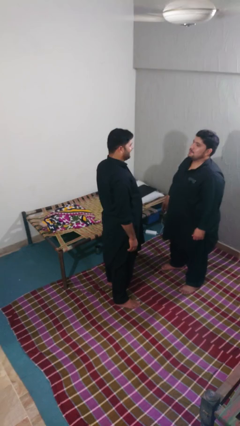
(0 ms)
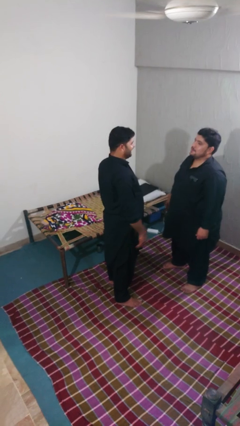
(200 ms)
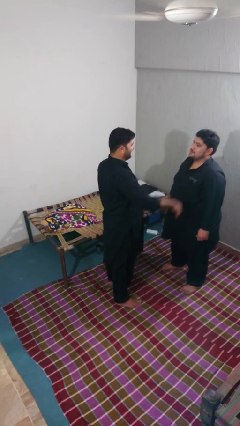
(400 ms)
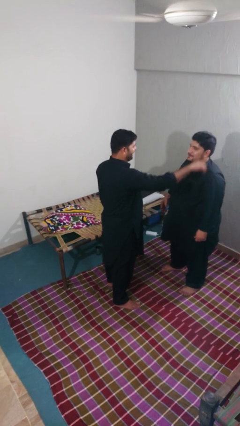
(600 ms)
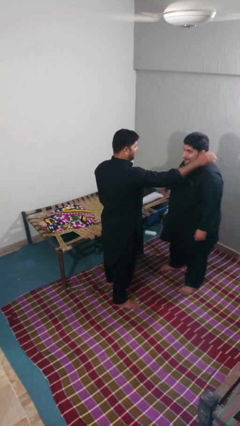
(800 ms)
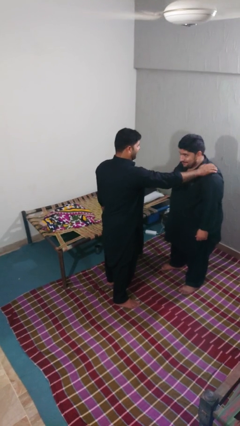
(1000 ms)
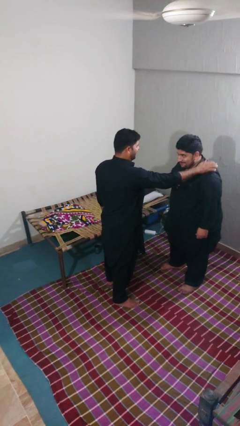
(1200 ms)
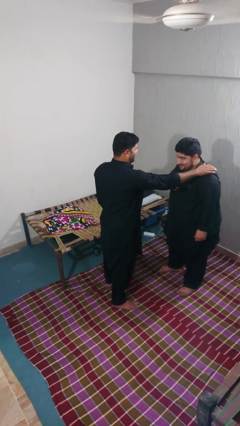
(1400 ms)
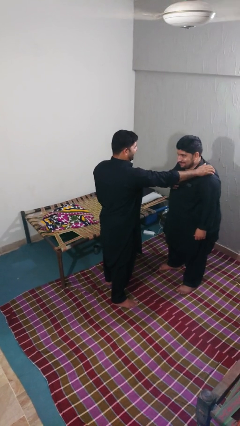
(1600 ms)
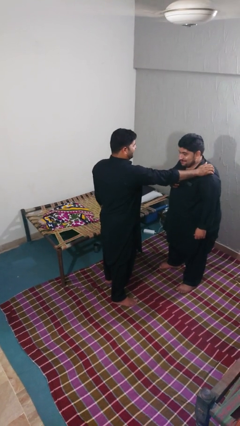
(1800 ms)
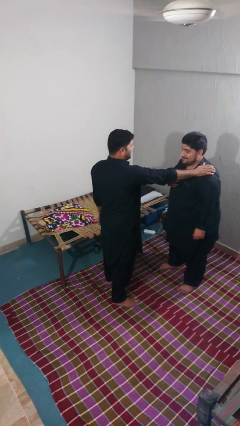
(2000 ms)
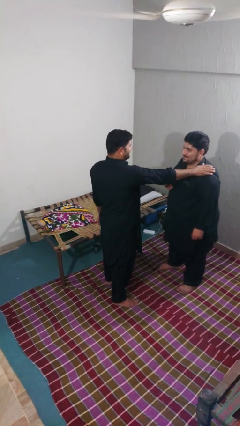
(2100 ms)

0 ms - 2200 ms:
person pounds shoulders of person

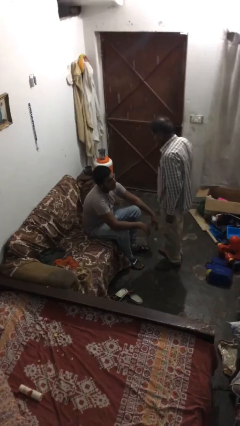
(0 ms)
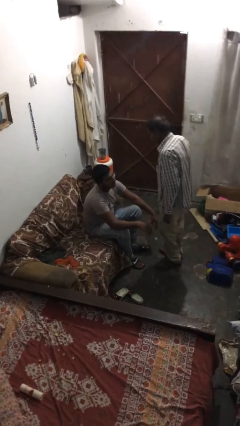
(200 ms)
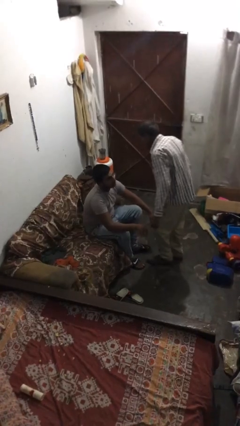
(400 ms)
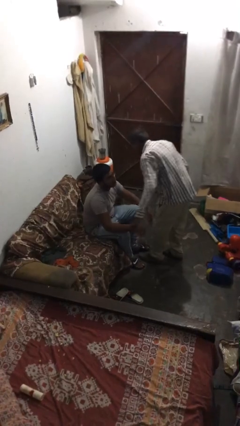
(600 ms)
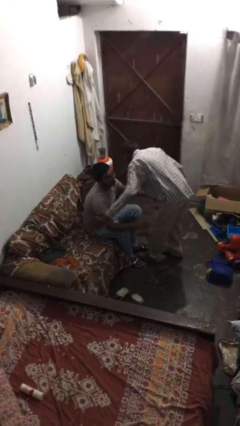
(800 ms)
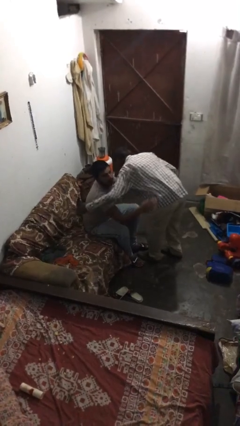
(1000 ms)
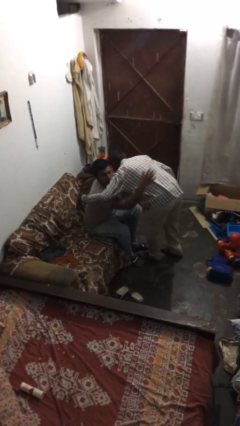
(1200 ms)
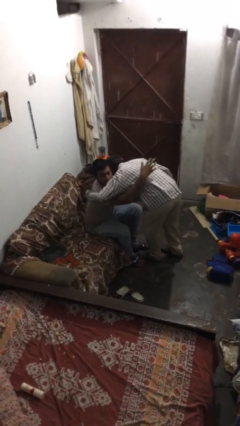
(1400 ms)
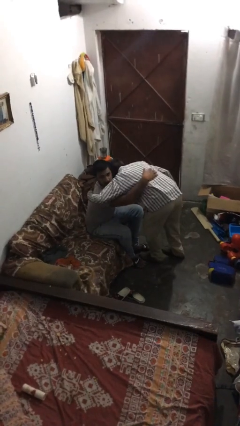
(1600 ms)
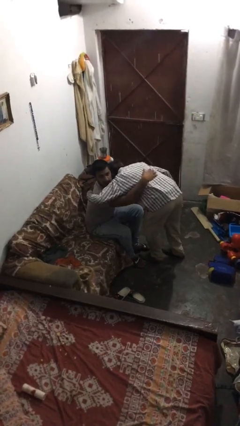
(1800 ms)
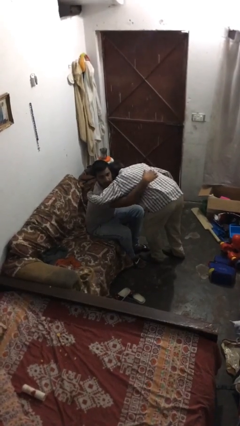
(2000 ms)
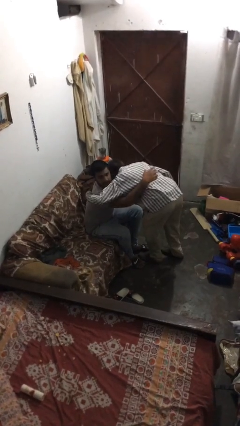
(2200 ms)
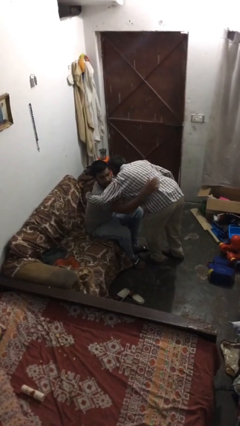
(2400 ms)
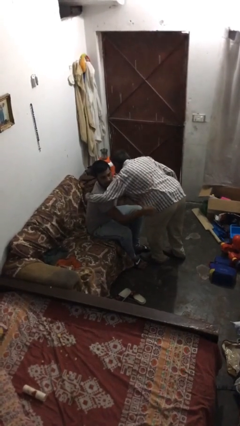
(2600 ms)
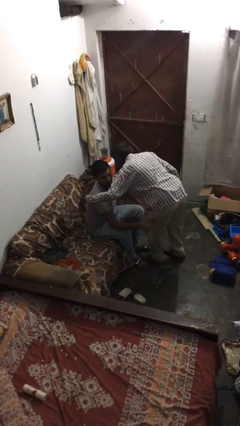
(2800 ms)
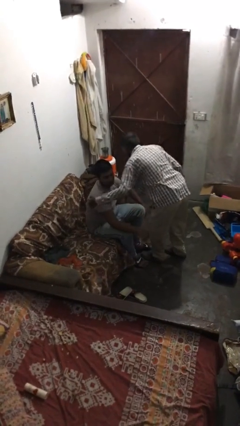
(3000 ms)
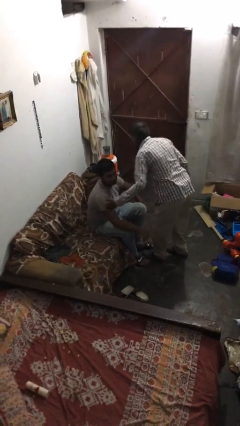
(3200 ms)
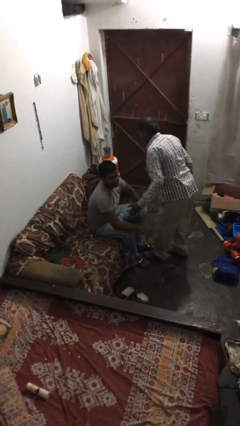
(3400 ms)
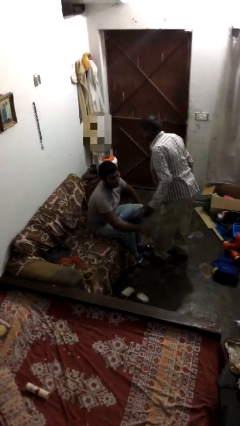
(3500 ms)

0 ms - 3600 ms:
person embraces person

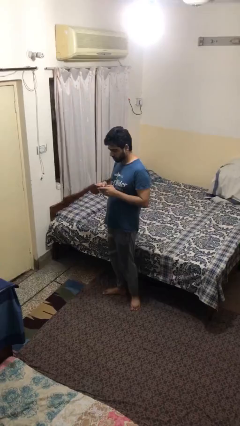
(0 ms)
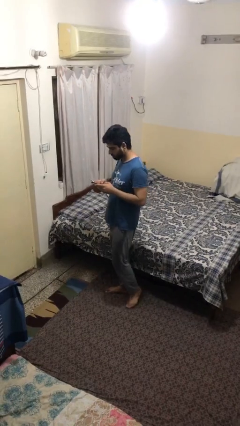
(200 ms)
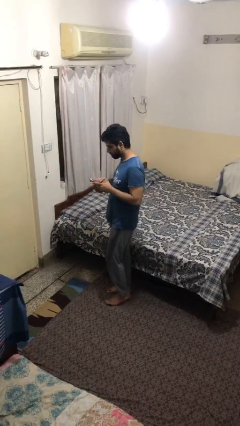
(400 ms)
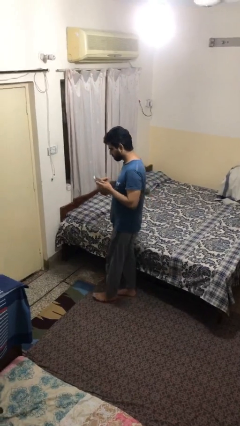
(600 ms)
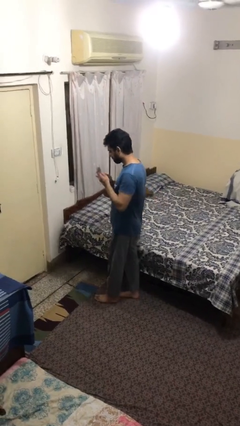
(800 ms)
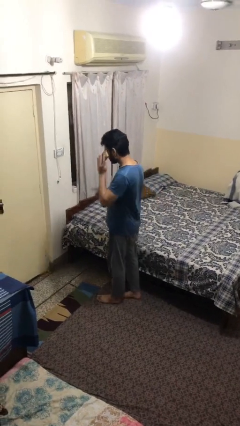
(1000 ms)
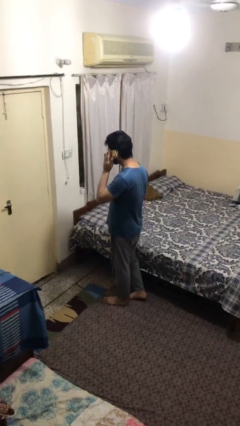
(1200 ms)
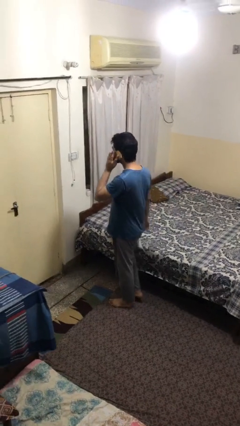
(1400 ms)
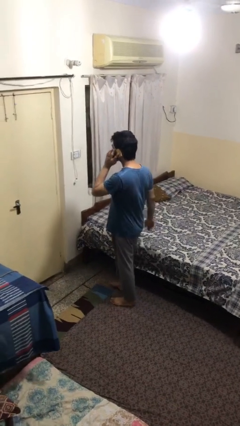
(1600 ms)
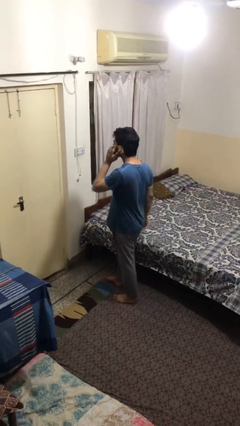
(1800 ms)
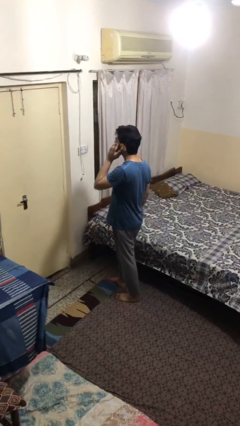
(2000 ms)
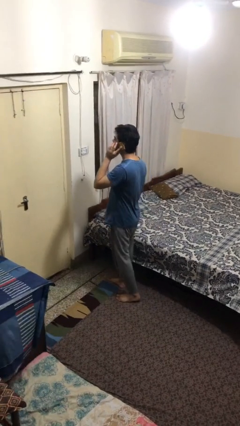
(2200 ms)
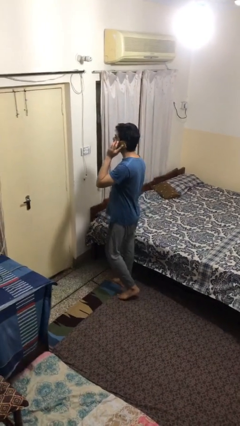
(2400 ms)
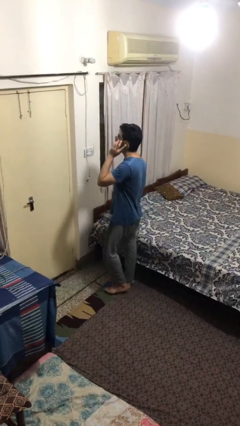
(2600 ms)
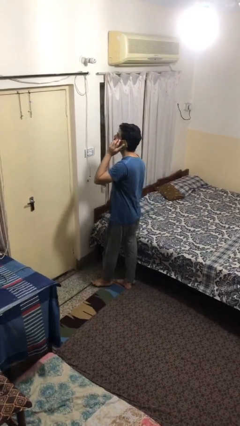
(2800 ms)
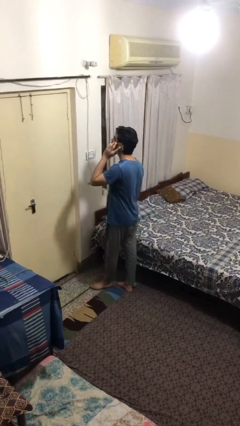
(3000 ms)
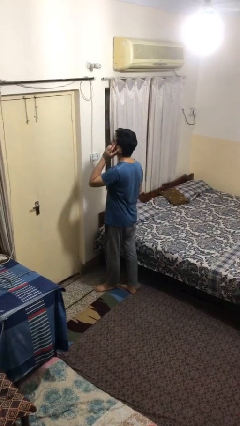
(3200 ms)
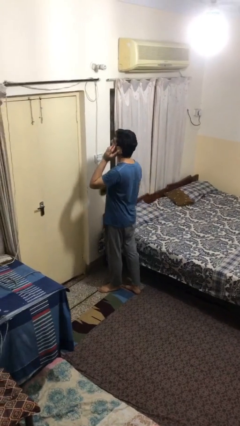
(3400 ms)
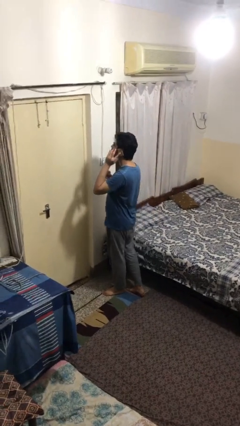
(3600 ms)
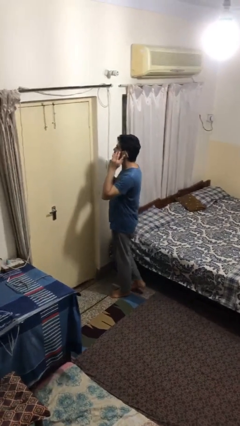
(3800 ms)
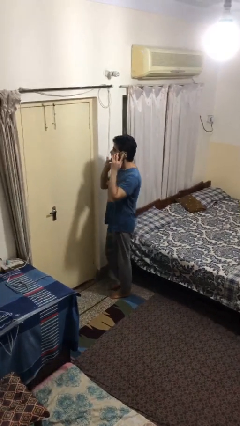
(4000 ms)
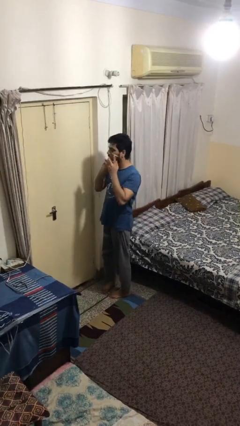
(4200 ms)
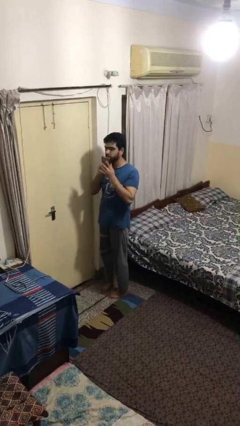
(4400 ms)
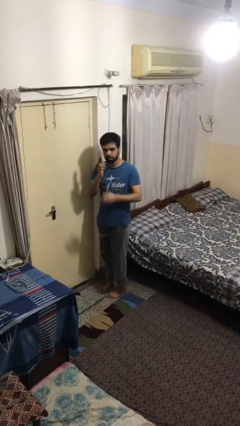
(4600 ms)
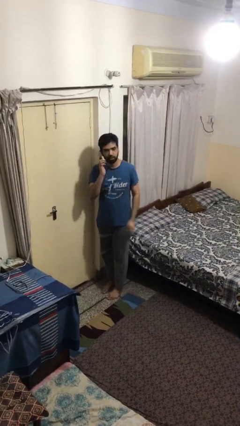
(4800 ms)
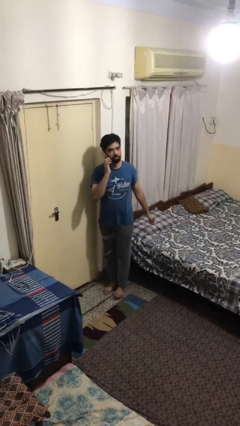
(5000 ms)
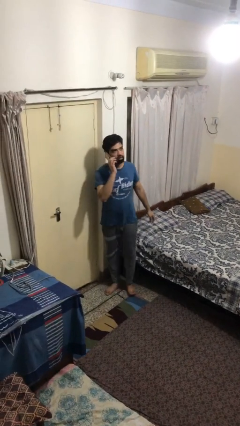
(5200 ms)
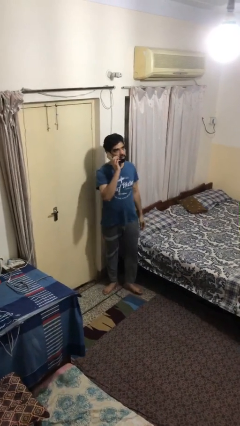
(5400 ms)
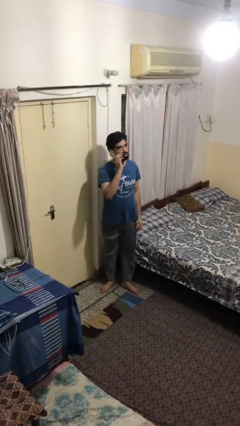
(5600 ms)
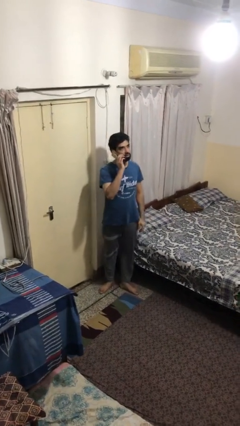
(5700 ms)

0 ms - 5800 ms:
person talks on phone

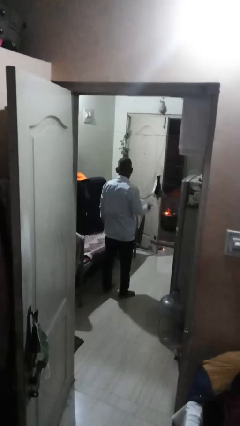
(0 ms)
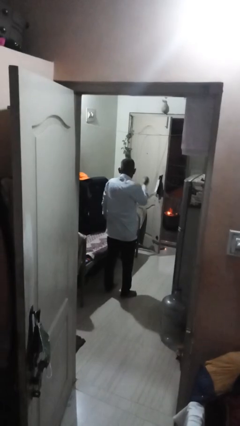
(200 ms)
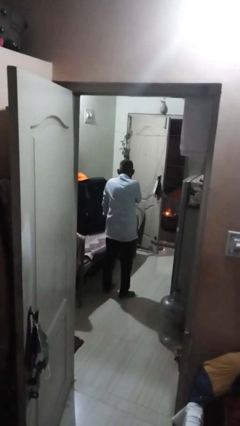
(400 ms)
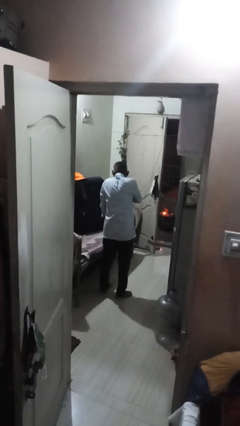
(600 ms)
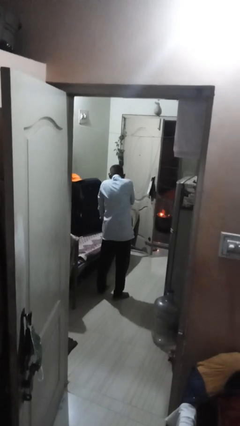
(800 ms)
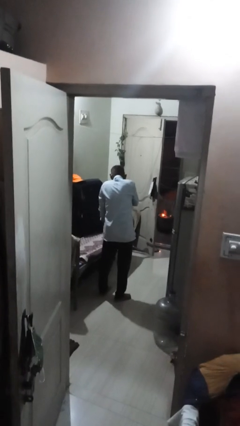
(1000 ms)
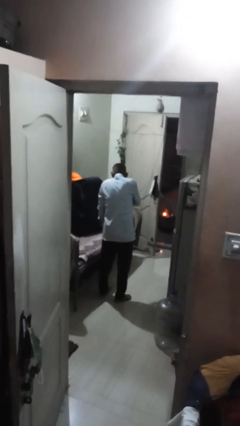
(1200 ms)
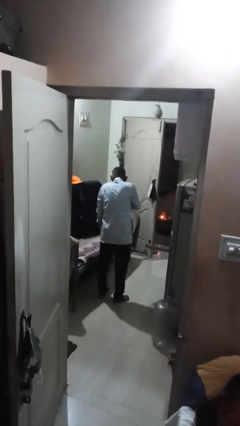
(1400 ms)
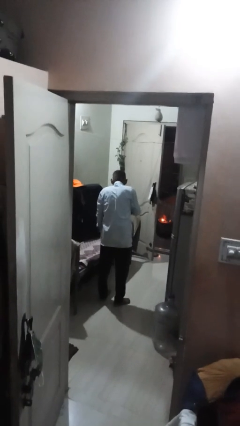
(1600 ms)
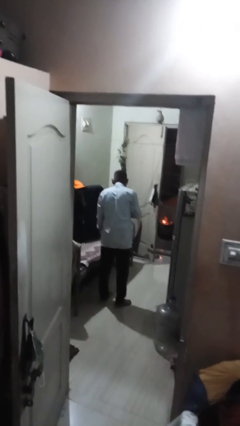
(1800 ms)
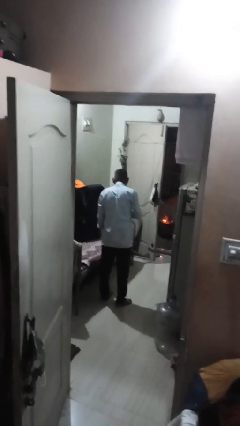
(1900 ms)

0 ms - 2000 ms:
person swats bug

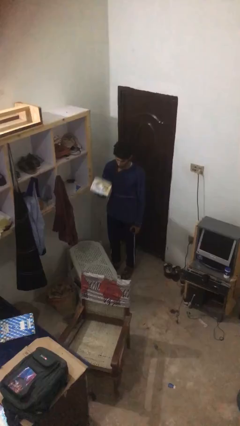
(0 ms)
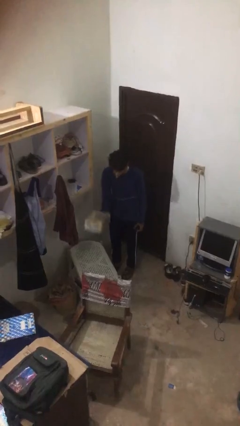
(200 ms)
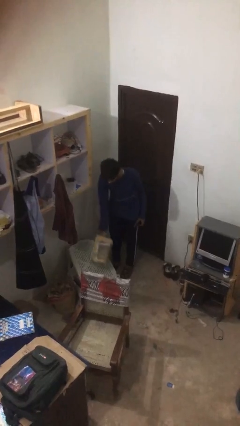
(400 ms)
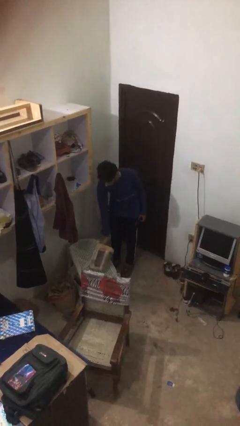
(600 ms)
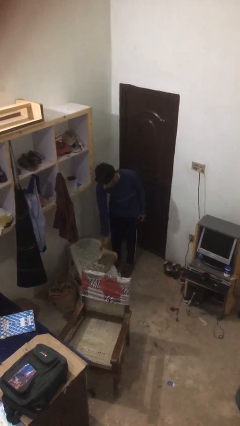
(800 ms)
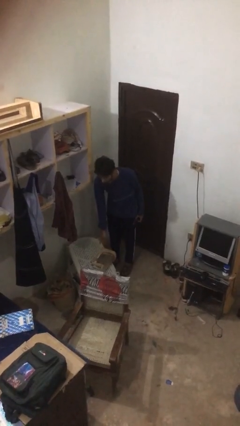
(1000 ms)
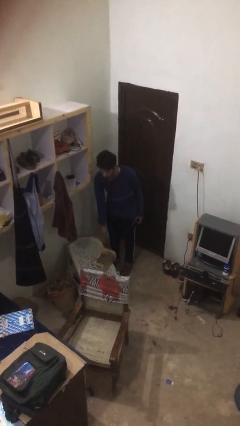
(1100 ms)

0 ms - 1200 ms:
person puts down object on table

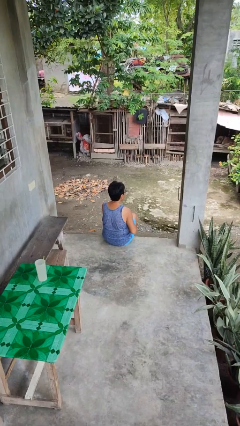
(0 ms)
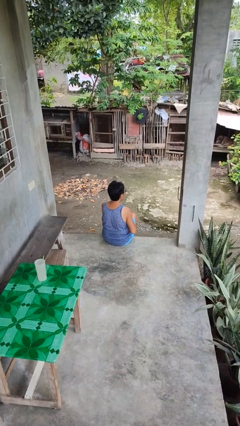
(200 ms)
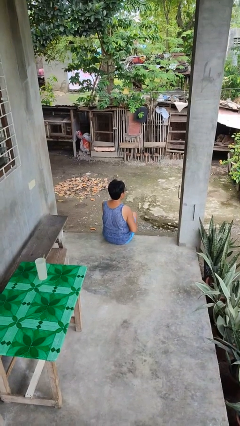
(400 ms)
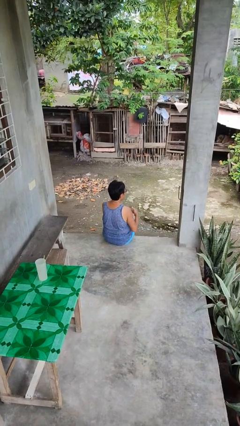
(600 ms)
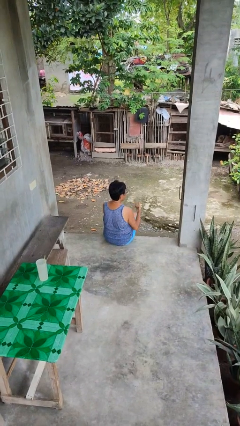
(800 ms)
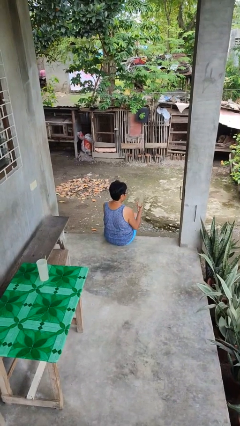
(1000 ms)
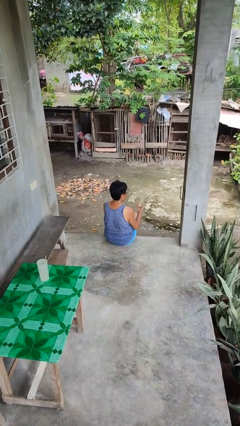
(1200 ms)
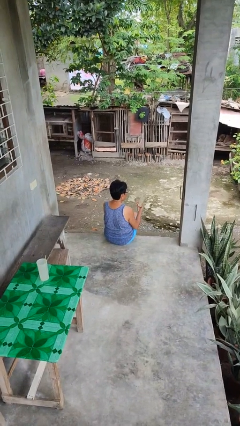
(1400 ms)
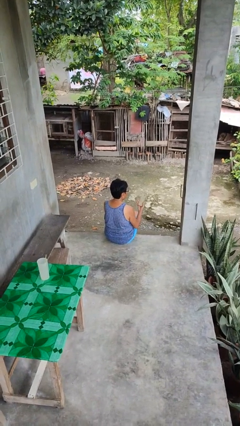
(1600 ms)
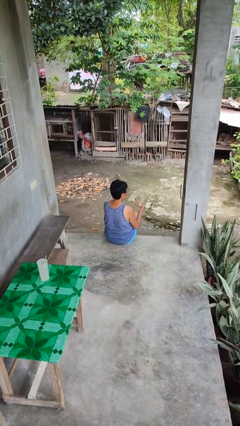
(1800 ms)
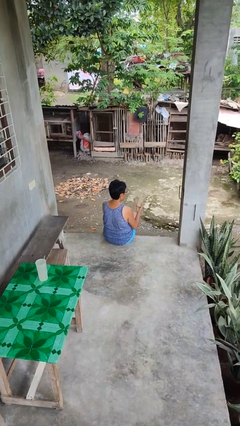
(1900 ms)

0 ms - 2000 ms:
person takes phone from pocket

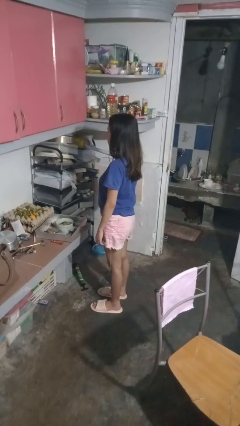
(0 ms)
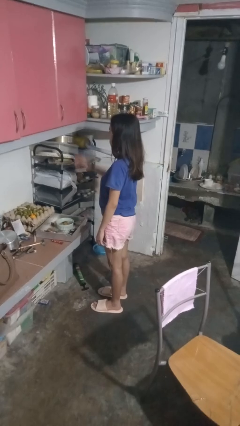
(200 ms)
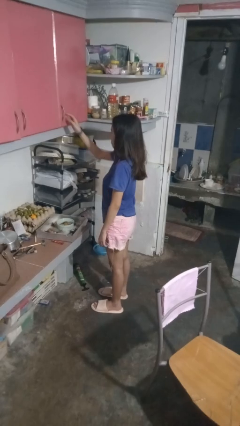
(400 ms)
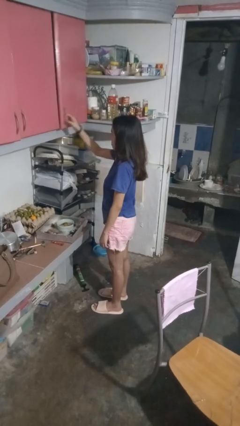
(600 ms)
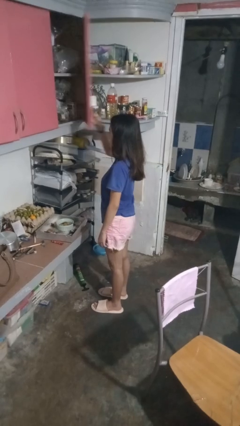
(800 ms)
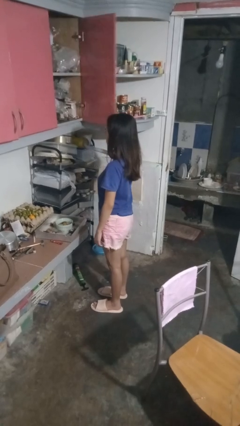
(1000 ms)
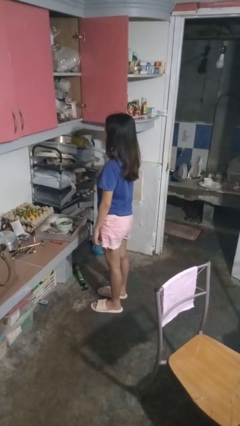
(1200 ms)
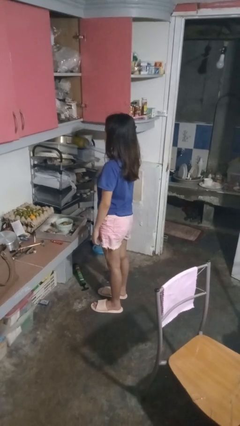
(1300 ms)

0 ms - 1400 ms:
person opens cabinet
